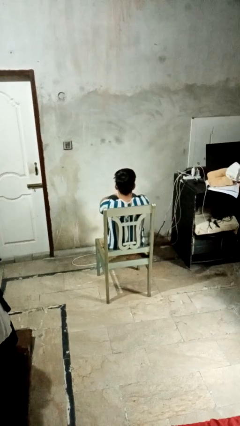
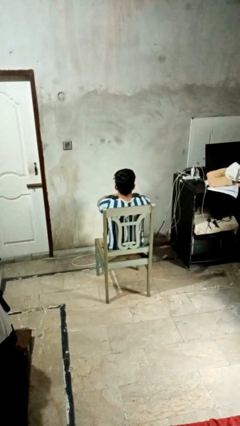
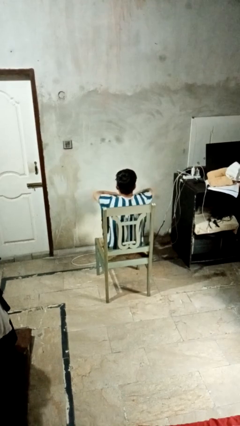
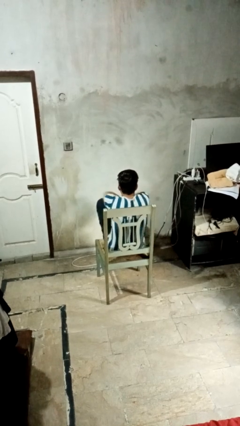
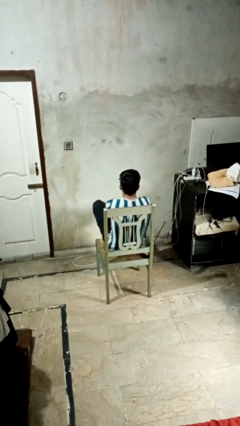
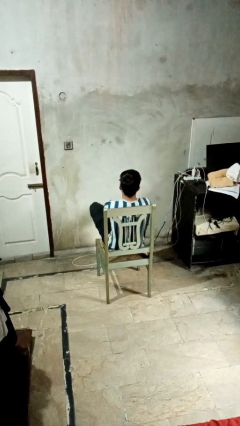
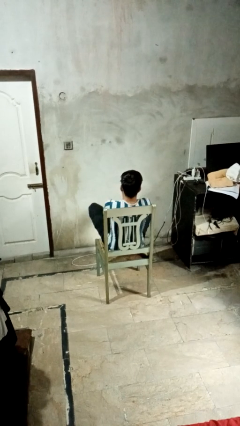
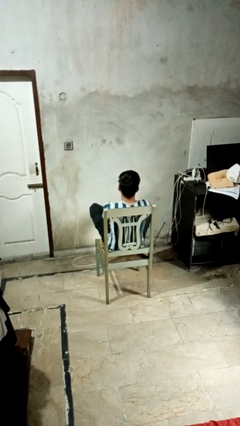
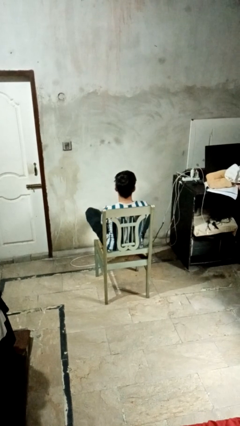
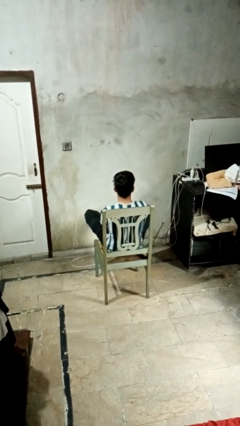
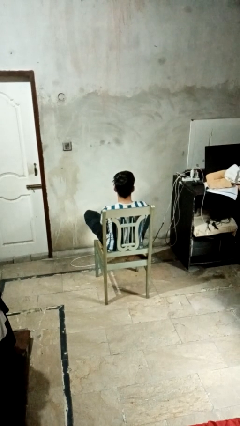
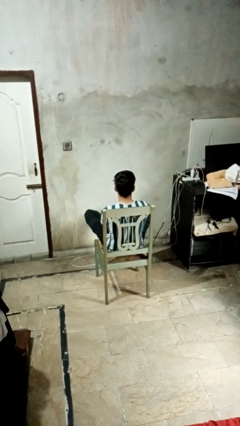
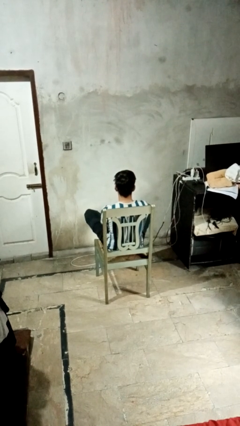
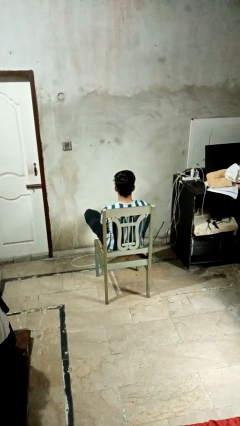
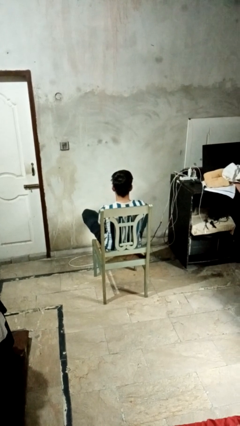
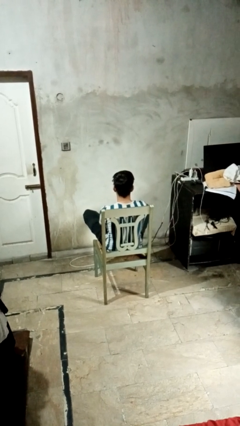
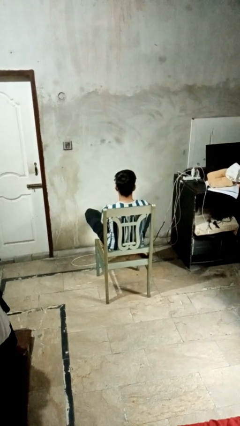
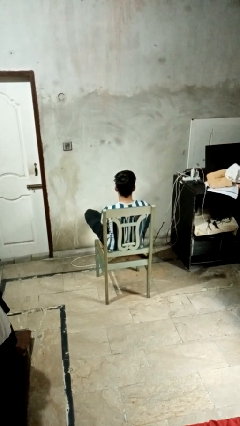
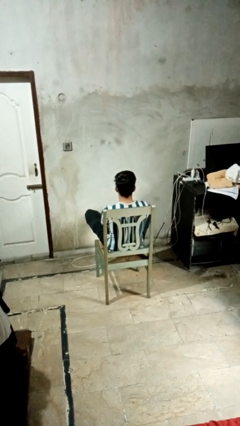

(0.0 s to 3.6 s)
person crosses legs

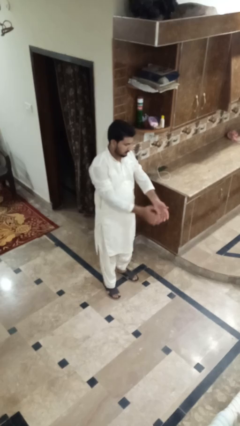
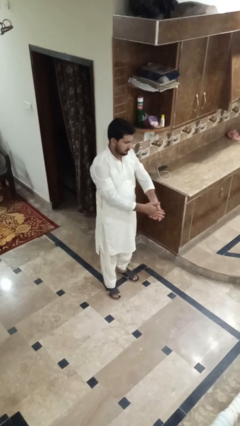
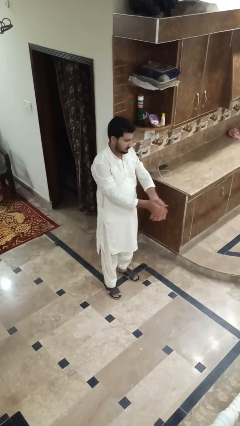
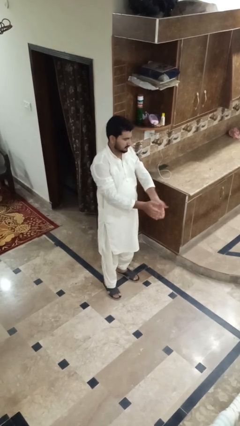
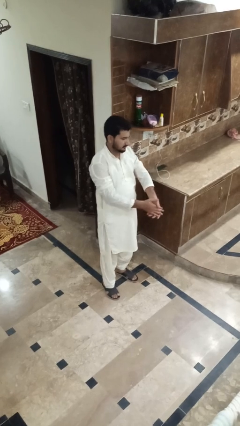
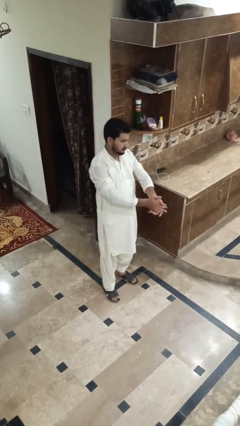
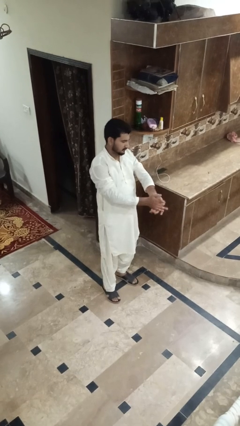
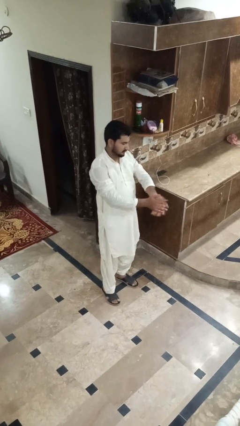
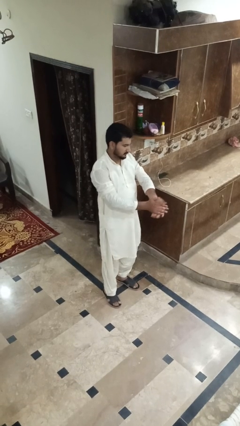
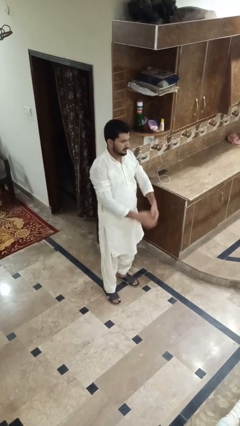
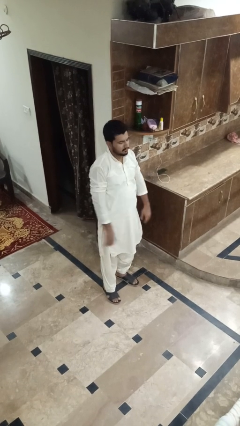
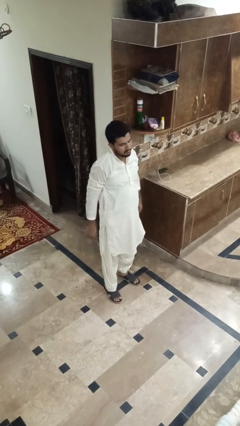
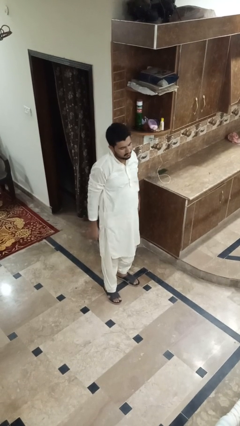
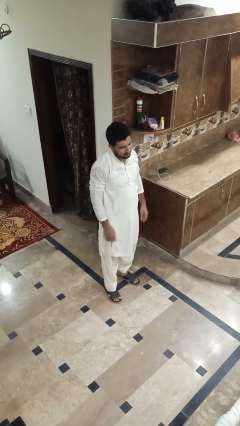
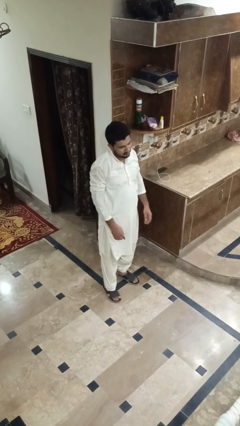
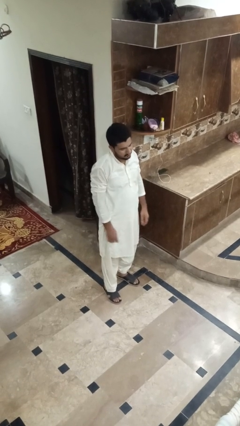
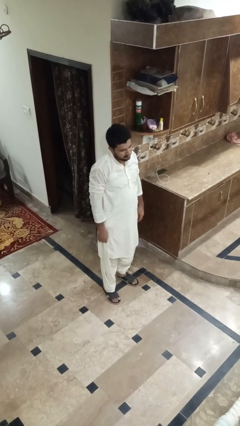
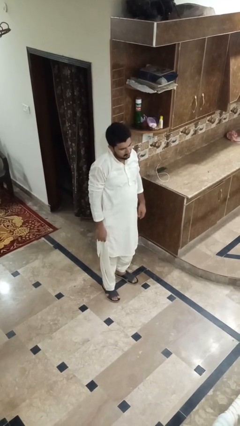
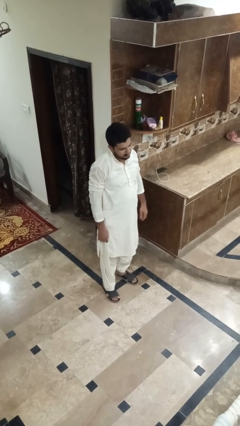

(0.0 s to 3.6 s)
person claps hands

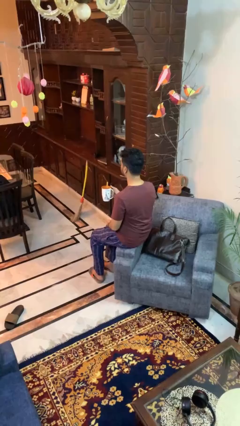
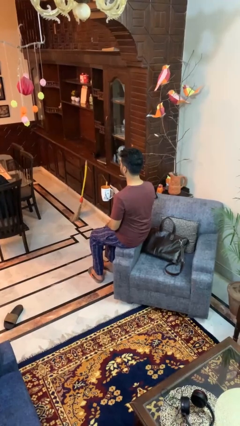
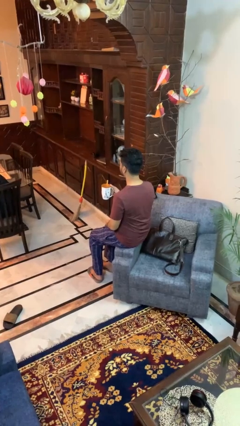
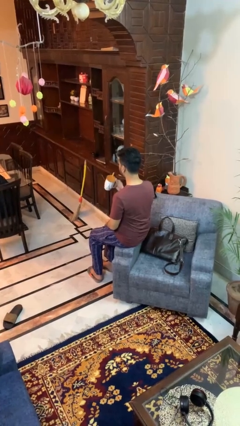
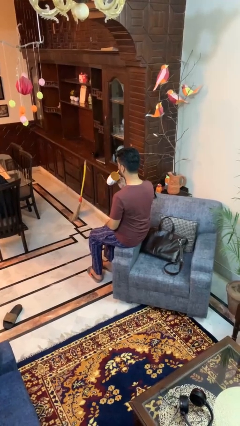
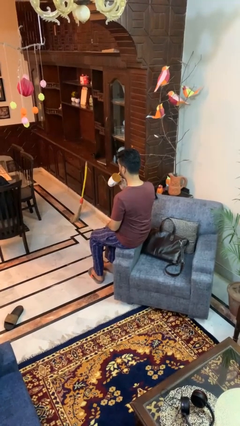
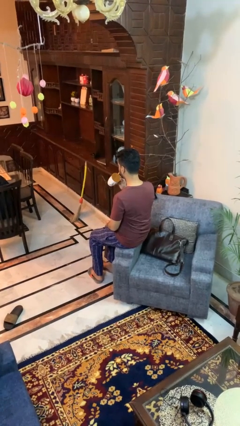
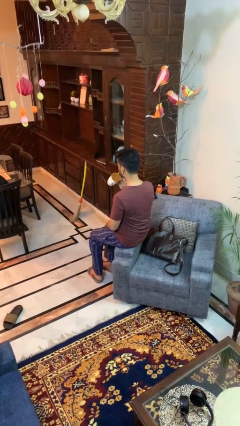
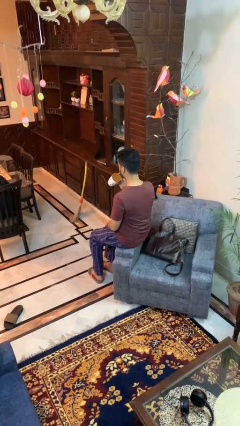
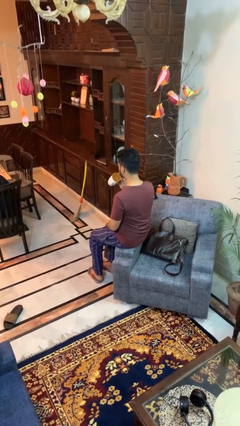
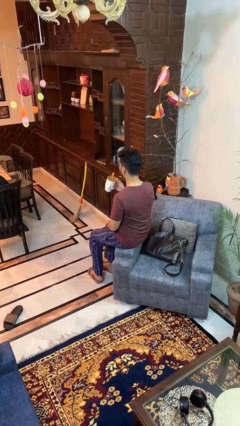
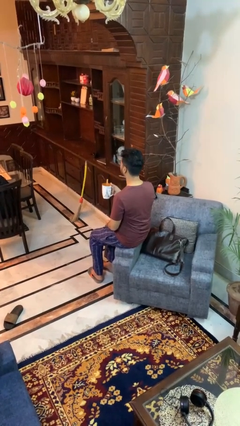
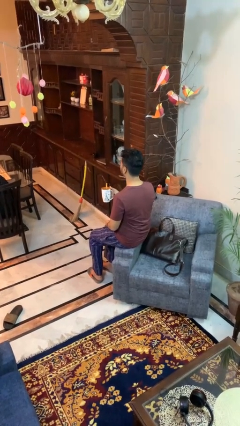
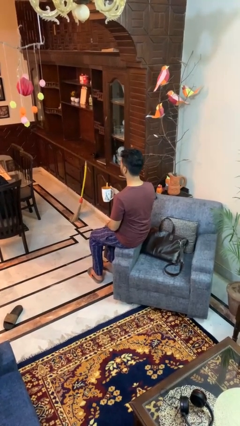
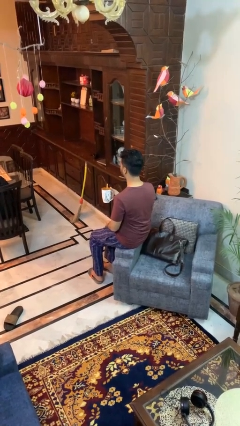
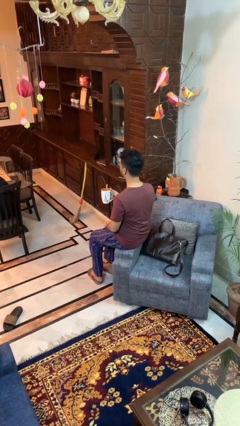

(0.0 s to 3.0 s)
person drinks from straw

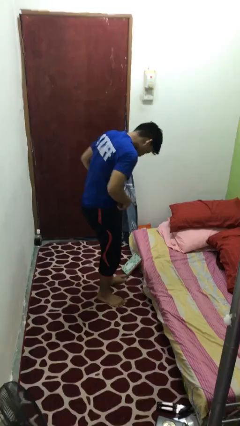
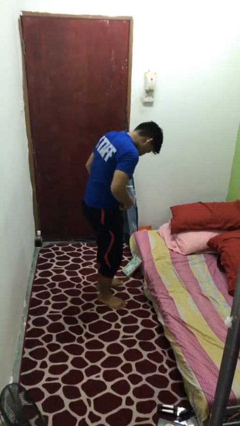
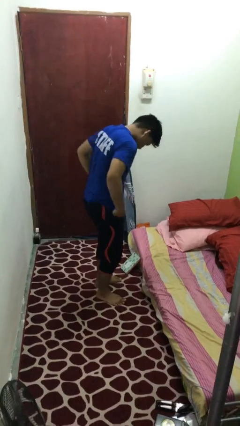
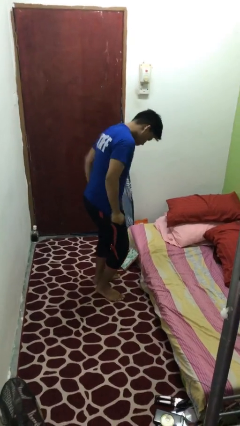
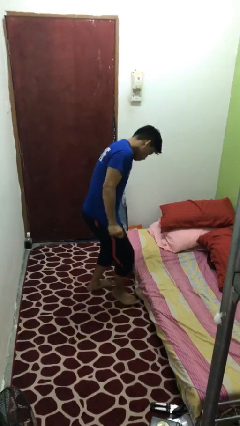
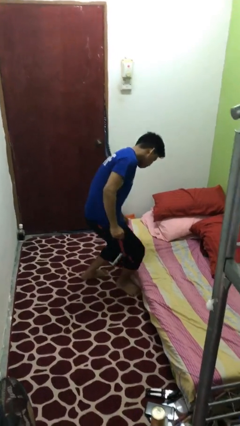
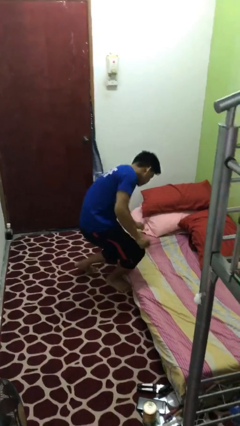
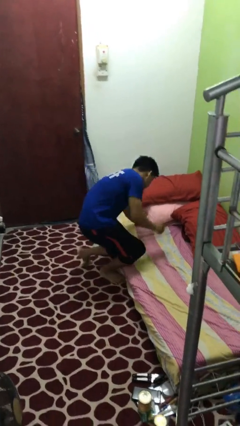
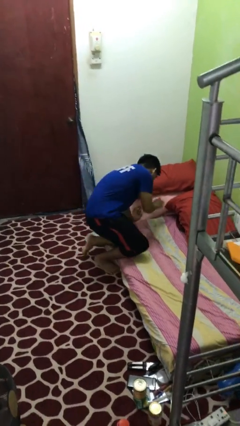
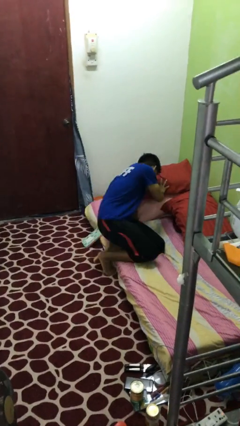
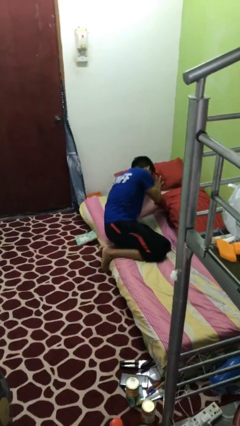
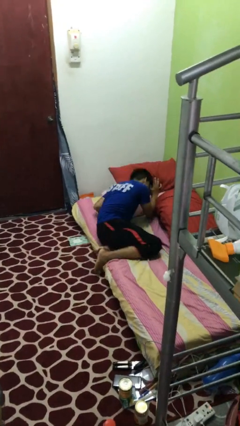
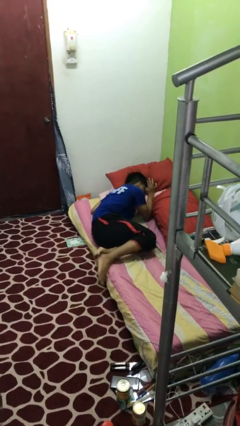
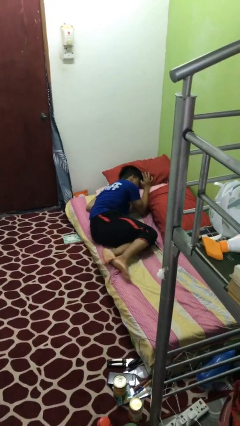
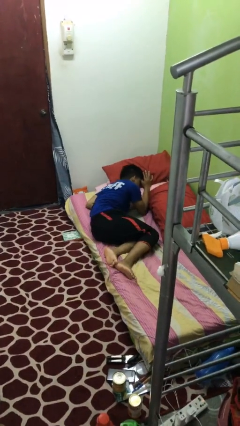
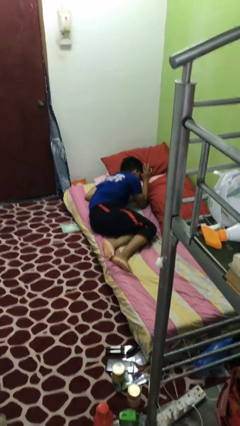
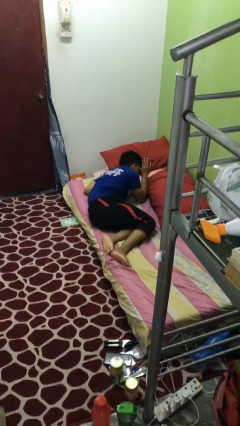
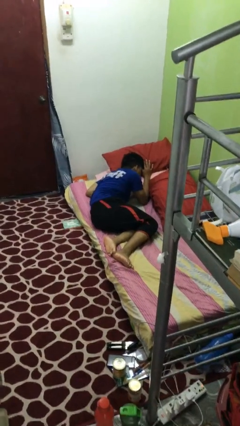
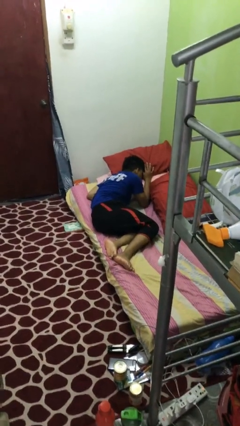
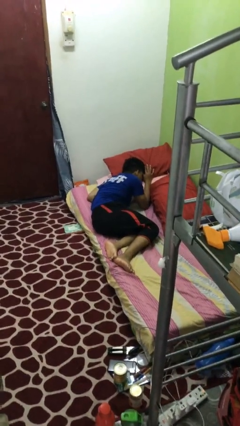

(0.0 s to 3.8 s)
person lies down on bed

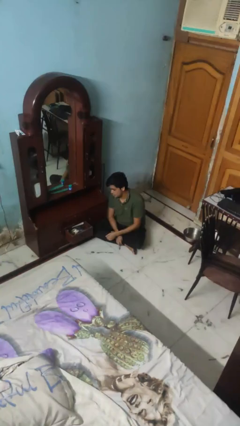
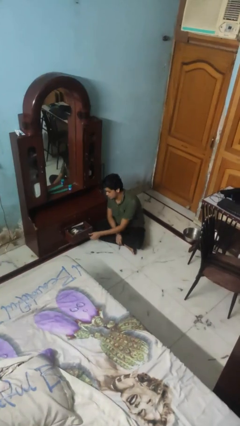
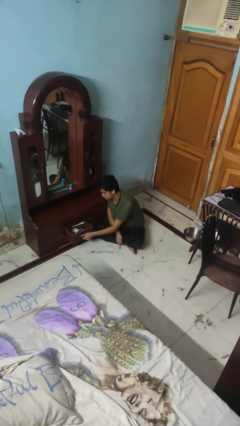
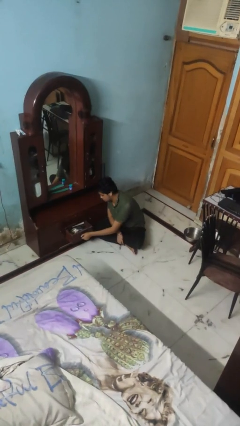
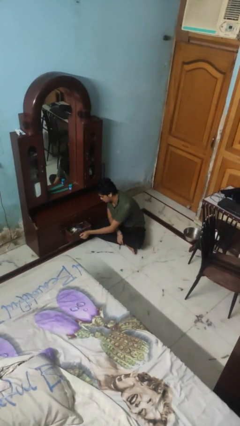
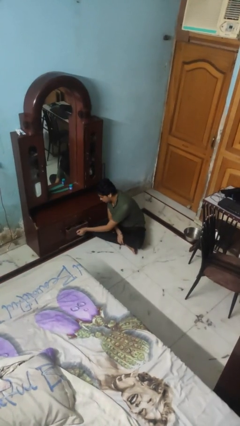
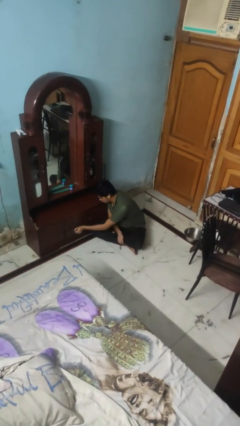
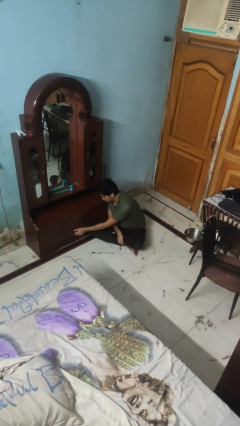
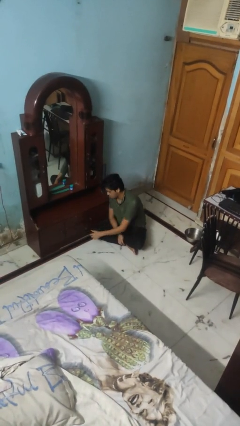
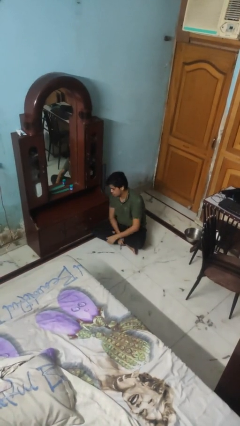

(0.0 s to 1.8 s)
person closes dresser drawer

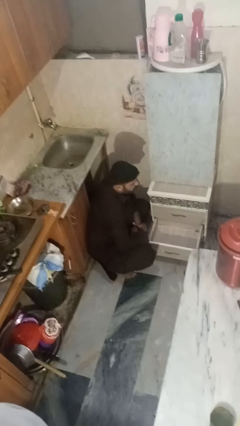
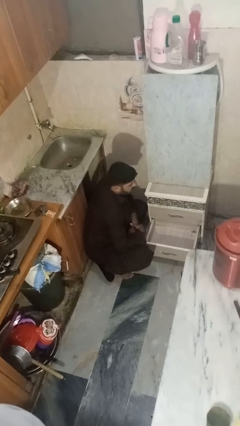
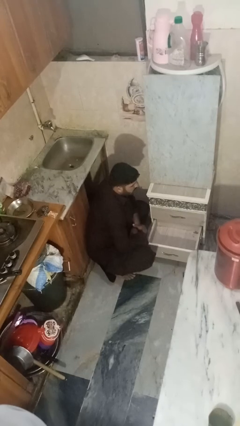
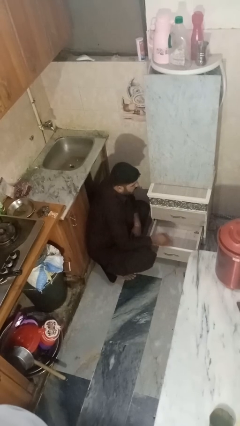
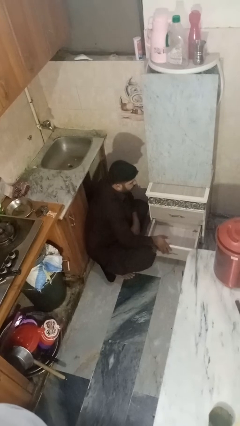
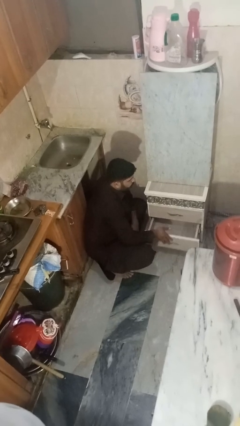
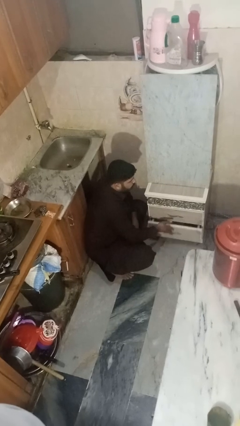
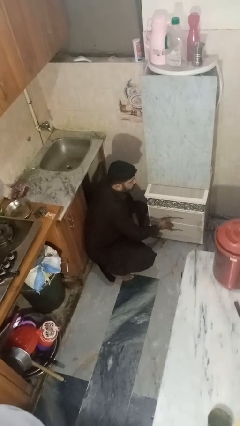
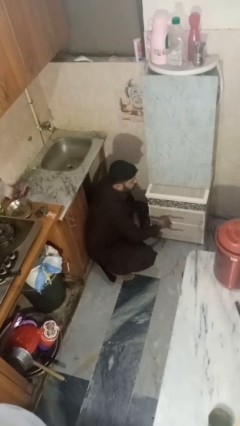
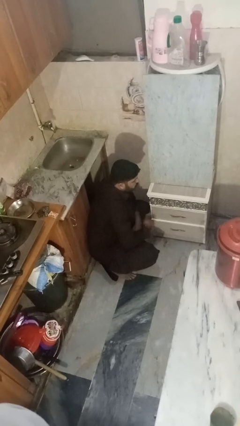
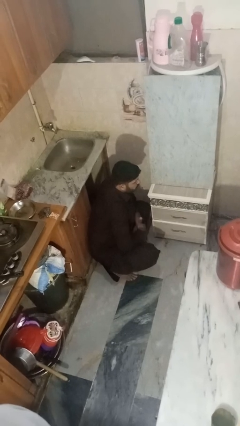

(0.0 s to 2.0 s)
person closes kitchen drawer
